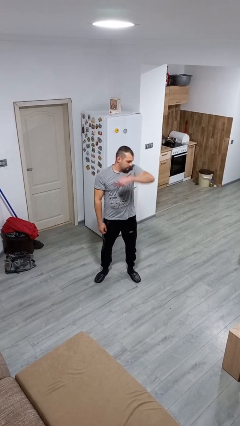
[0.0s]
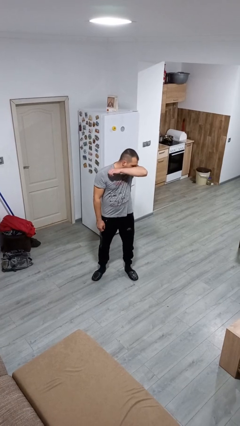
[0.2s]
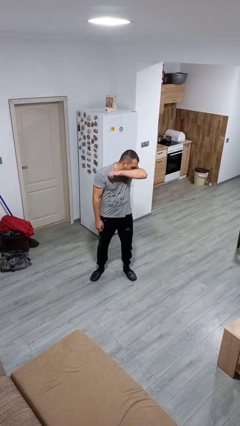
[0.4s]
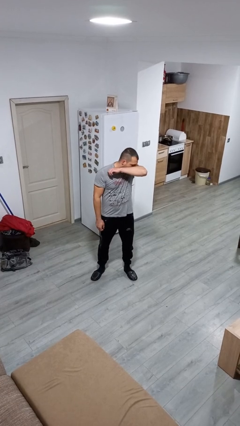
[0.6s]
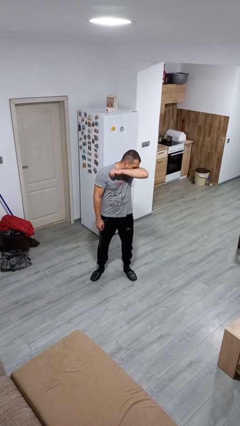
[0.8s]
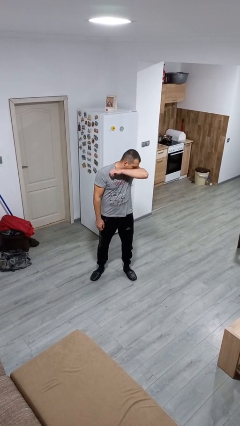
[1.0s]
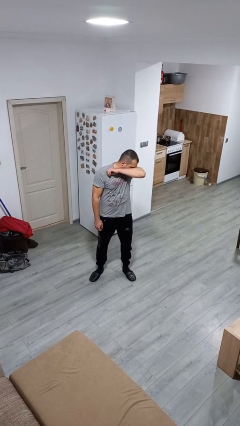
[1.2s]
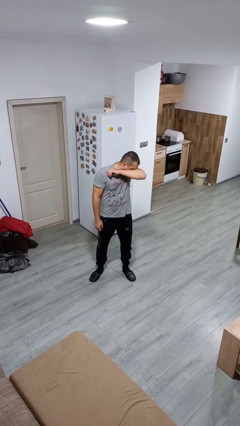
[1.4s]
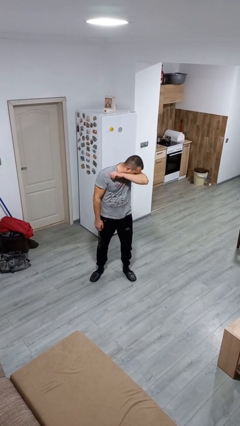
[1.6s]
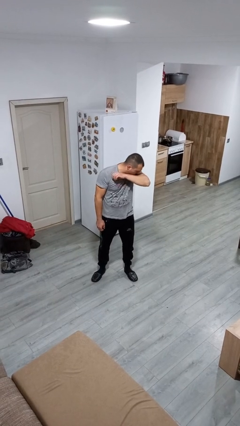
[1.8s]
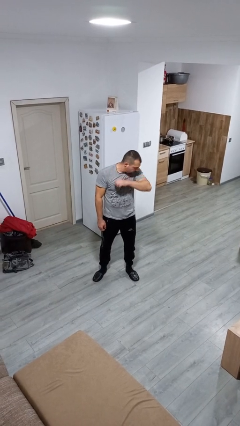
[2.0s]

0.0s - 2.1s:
person sneezes into arm

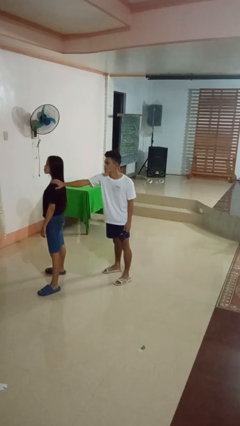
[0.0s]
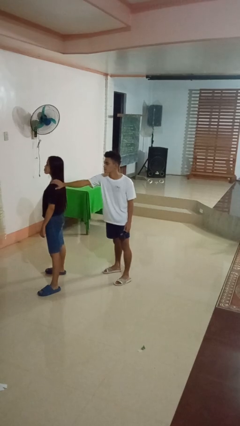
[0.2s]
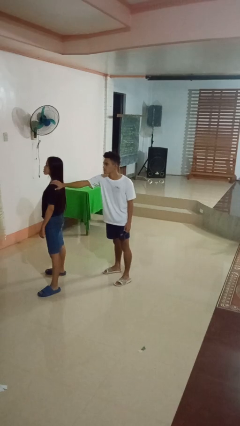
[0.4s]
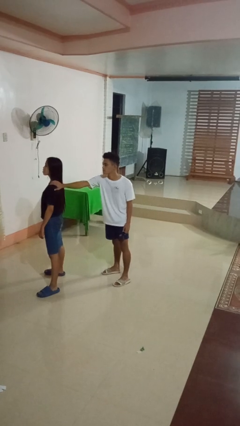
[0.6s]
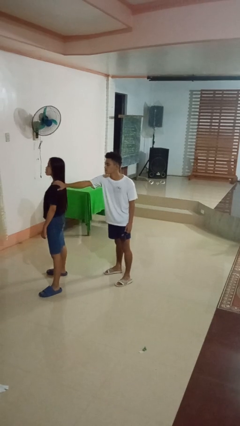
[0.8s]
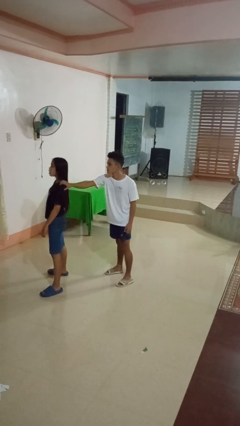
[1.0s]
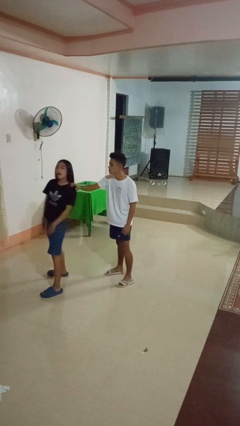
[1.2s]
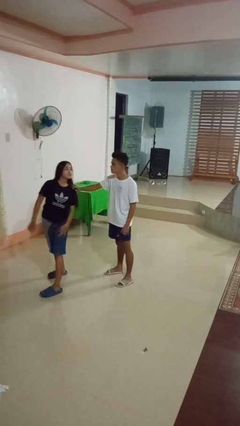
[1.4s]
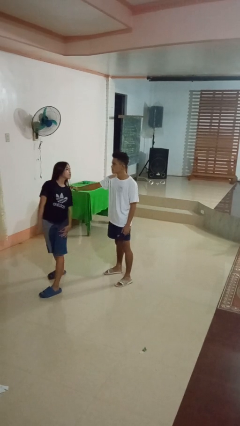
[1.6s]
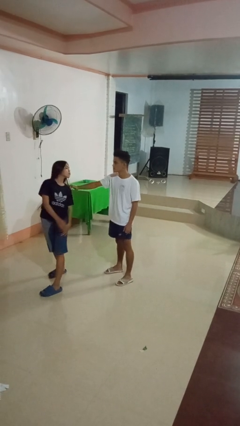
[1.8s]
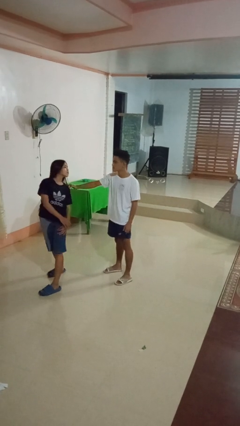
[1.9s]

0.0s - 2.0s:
person grabs person by shoulder

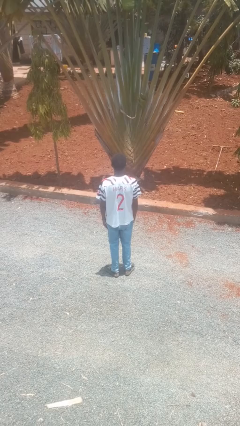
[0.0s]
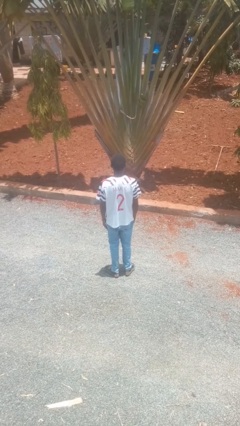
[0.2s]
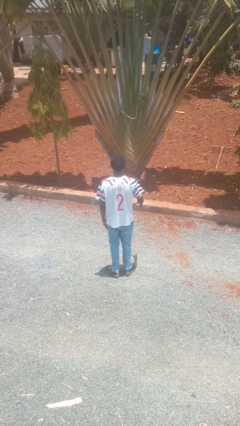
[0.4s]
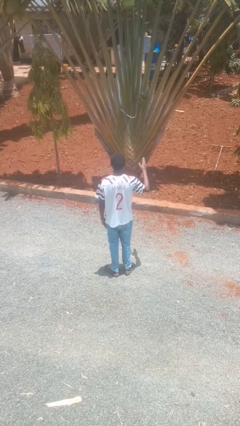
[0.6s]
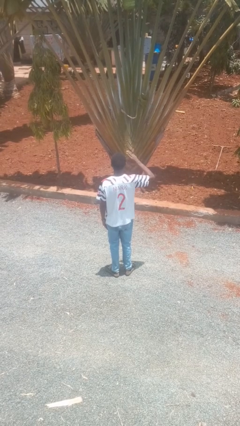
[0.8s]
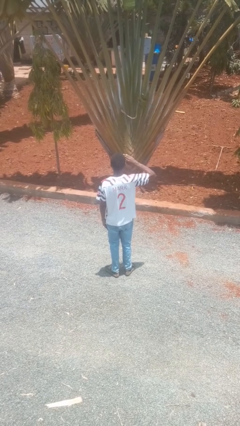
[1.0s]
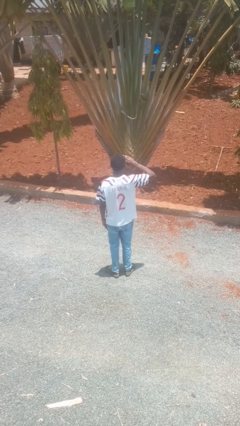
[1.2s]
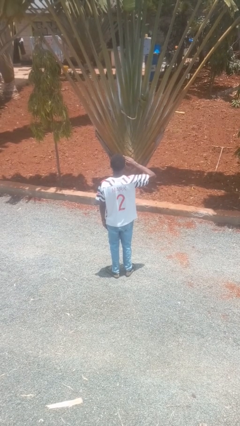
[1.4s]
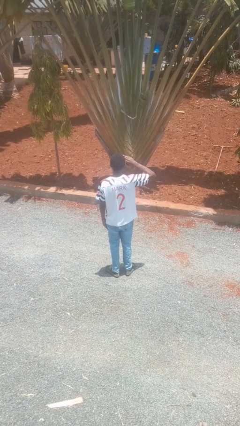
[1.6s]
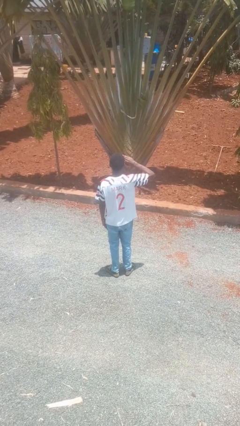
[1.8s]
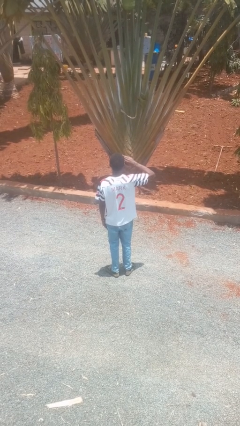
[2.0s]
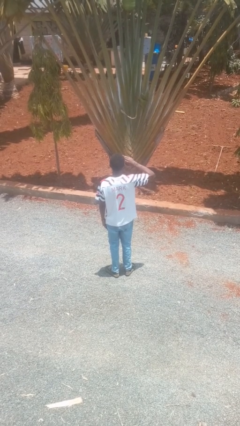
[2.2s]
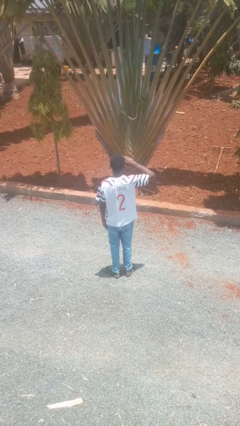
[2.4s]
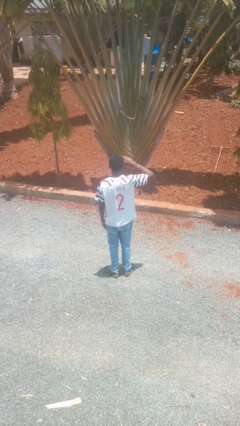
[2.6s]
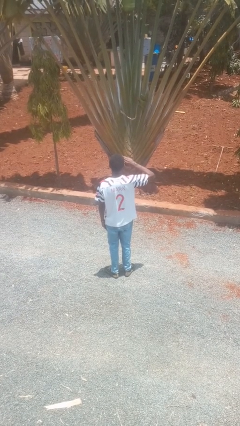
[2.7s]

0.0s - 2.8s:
person salutes

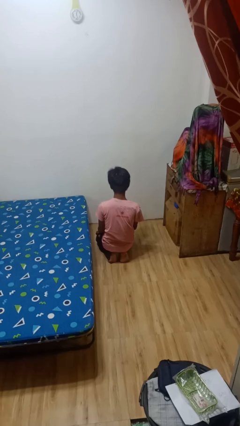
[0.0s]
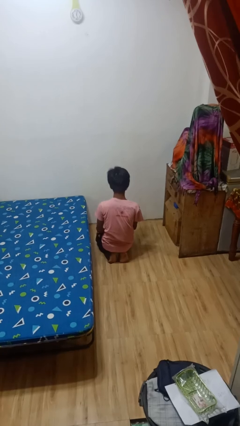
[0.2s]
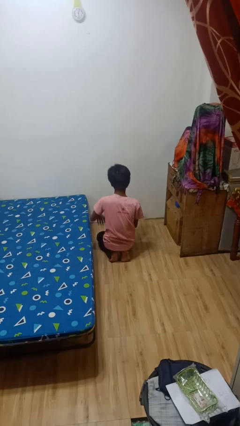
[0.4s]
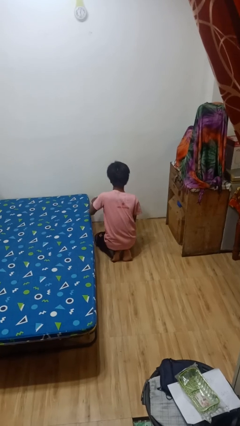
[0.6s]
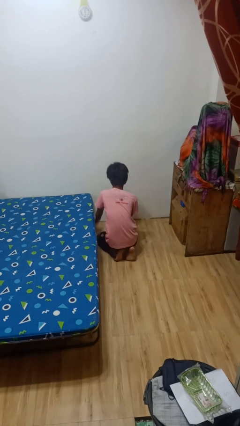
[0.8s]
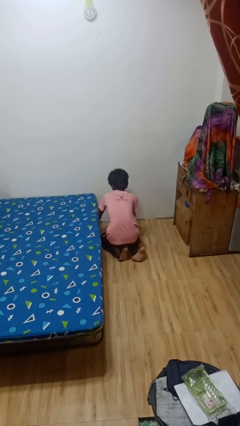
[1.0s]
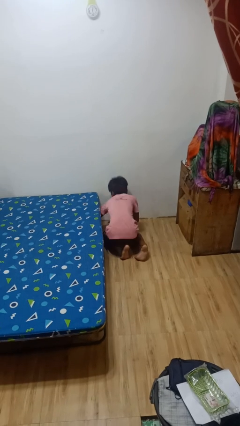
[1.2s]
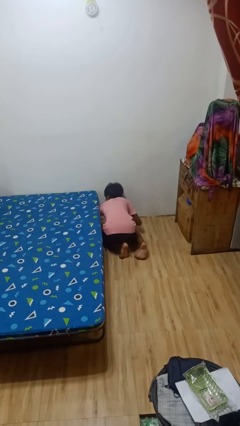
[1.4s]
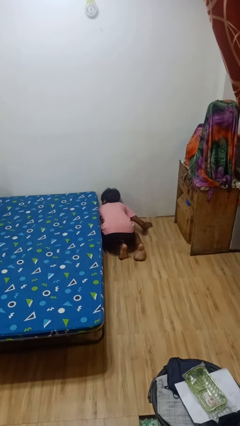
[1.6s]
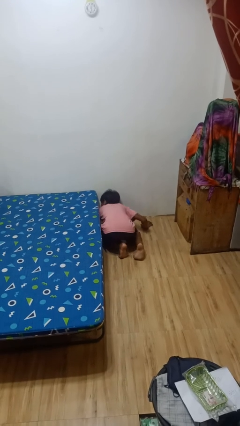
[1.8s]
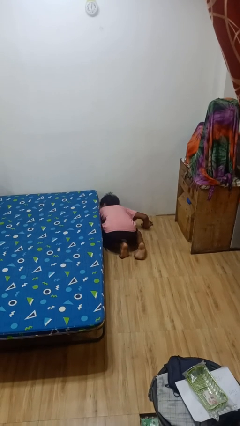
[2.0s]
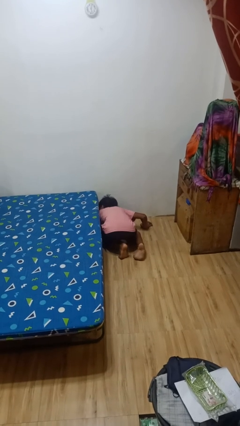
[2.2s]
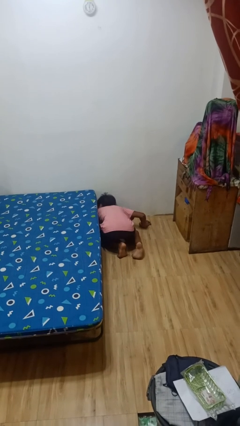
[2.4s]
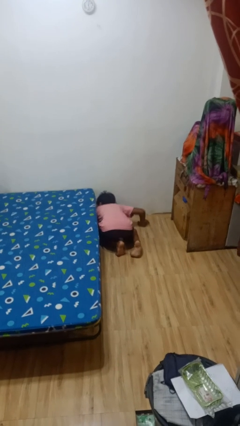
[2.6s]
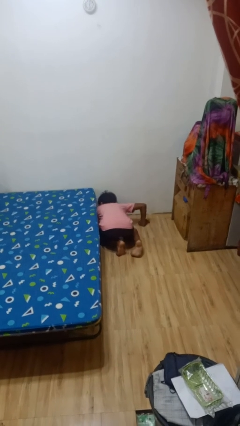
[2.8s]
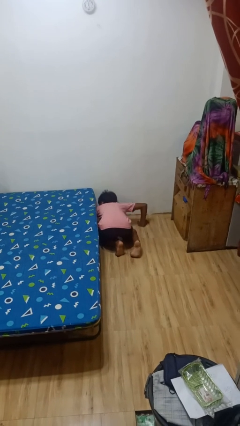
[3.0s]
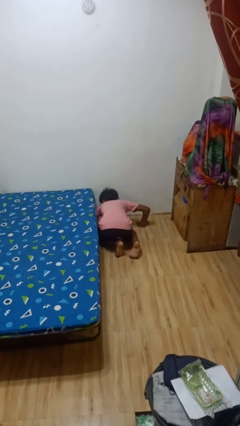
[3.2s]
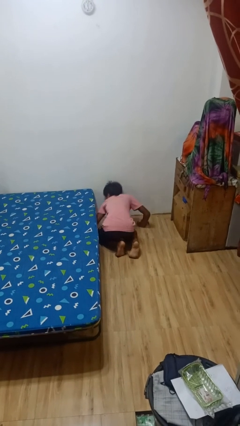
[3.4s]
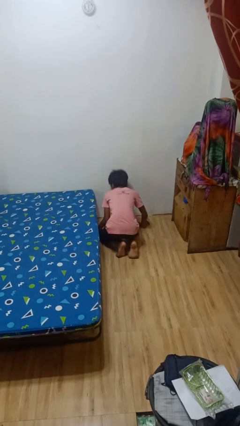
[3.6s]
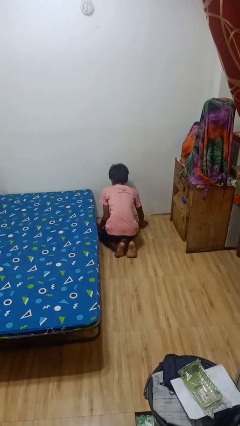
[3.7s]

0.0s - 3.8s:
person searches under bed

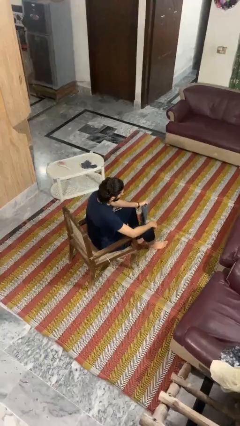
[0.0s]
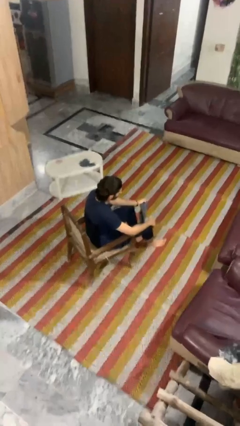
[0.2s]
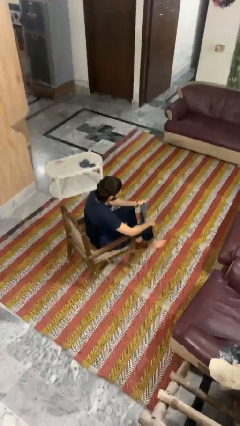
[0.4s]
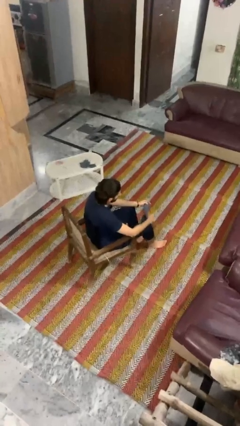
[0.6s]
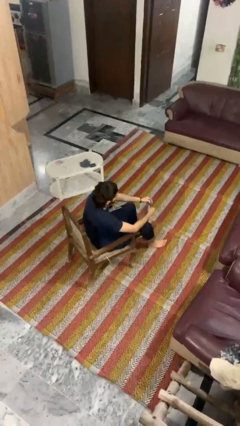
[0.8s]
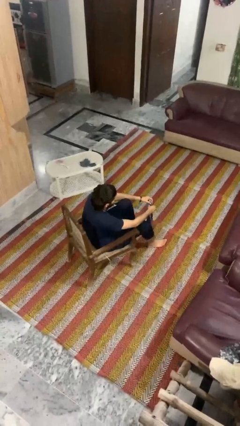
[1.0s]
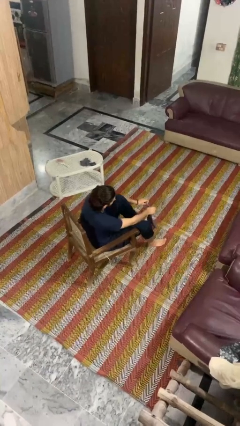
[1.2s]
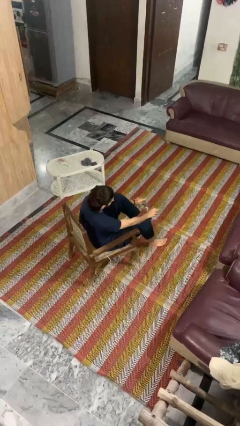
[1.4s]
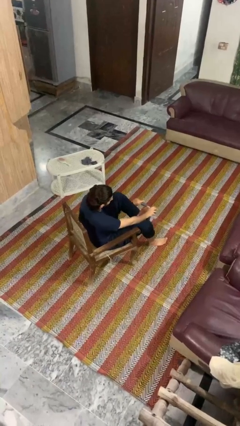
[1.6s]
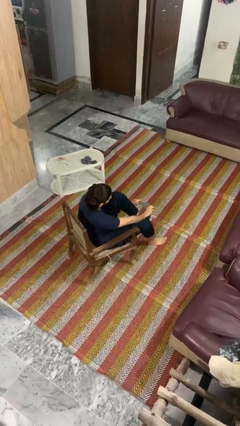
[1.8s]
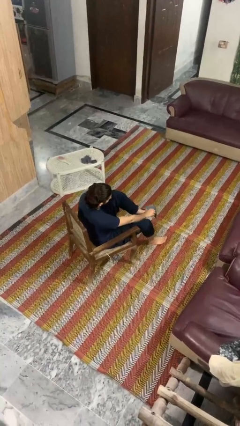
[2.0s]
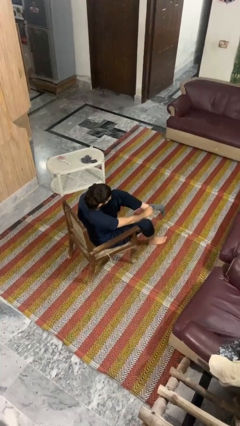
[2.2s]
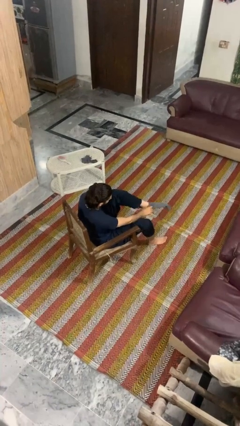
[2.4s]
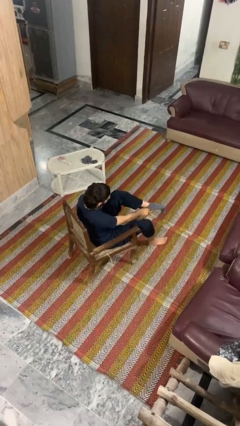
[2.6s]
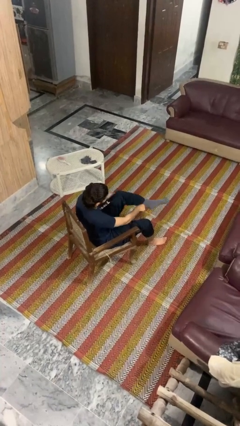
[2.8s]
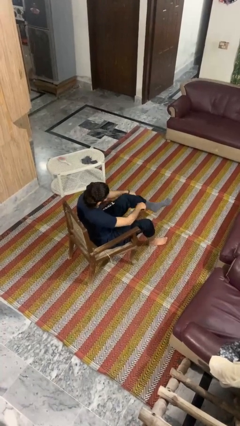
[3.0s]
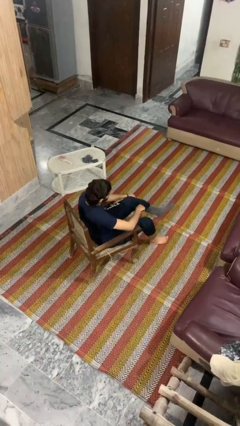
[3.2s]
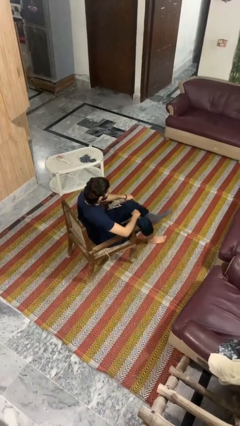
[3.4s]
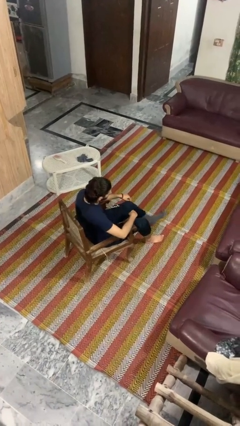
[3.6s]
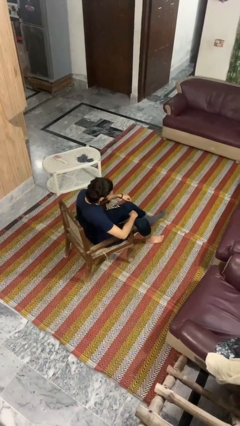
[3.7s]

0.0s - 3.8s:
person puts on socks

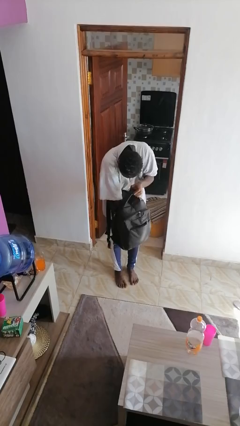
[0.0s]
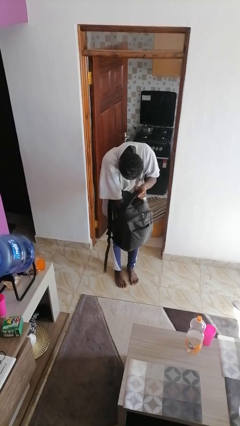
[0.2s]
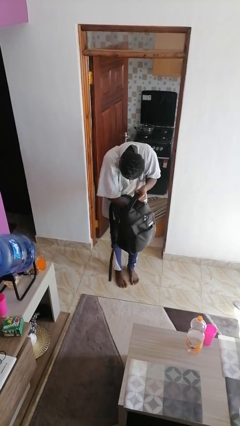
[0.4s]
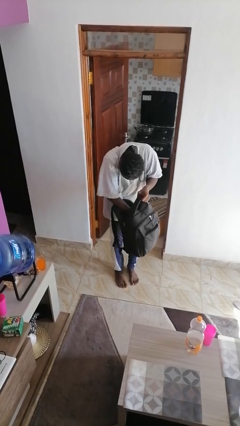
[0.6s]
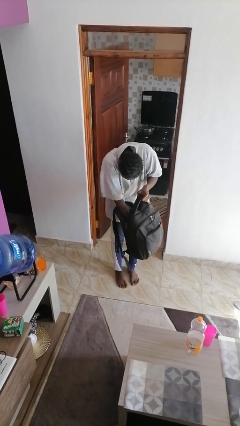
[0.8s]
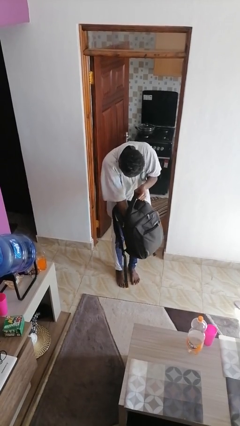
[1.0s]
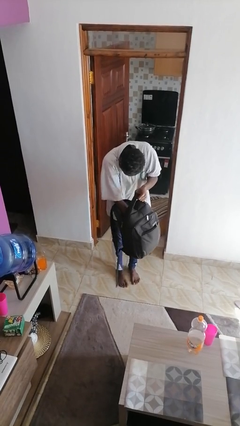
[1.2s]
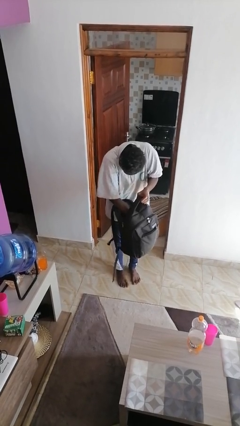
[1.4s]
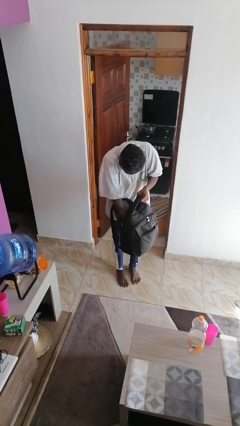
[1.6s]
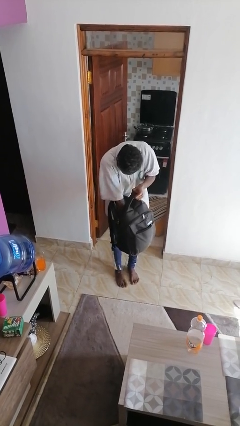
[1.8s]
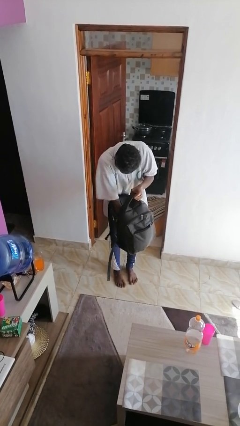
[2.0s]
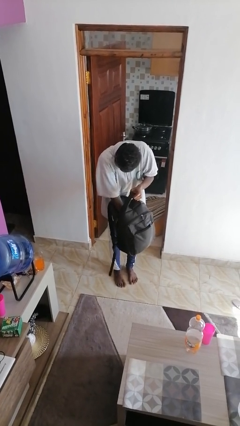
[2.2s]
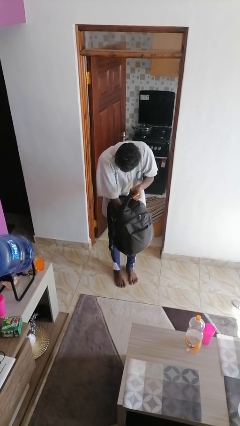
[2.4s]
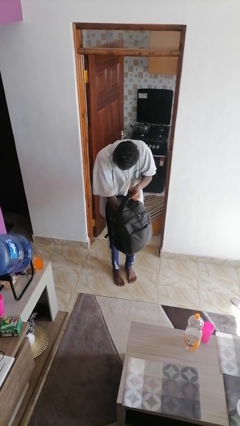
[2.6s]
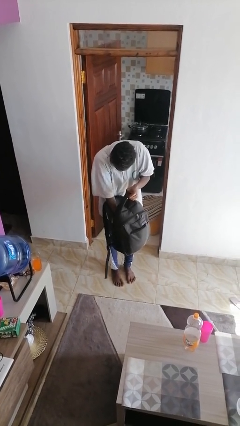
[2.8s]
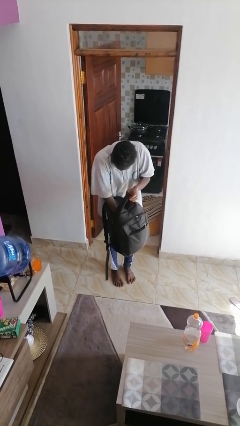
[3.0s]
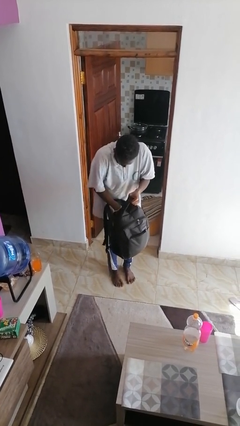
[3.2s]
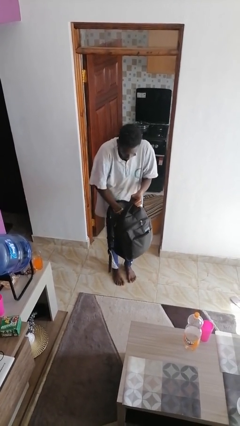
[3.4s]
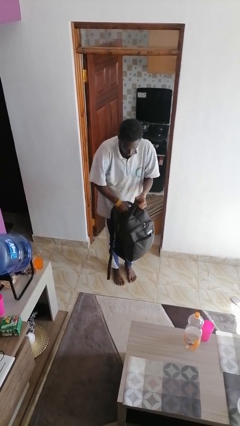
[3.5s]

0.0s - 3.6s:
person searches in backpack
